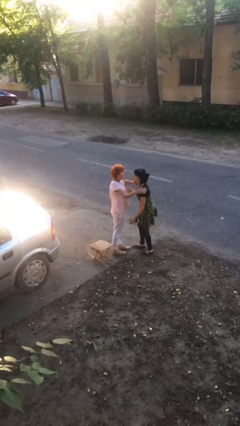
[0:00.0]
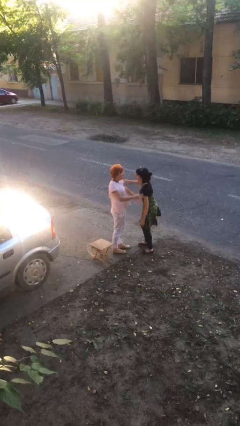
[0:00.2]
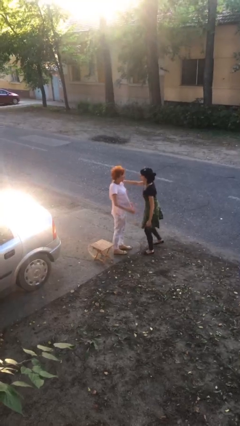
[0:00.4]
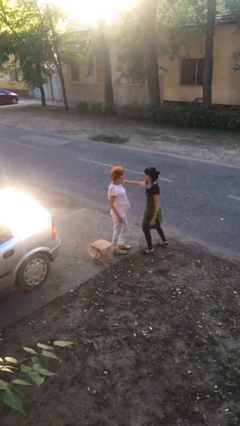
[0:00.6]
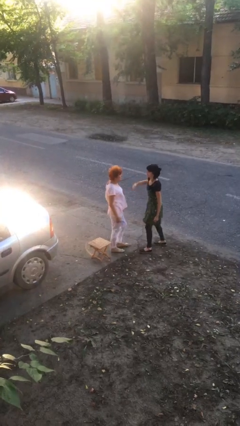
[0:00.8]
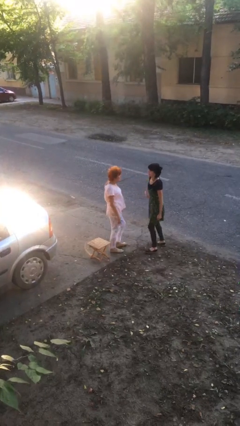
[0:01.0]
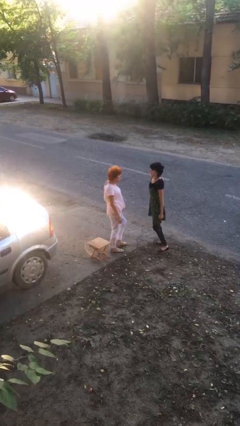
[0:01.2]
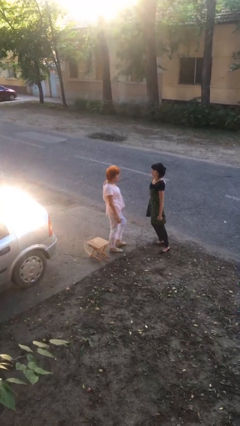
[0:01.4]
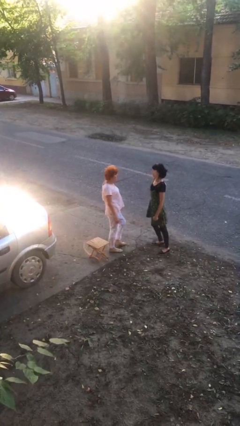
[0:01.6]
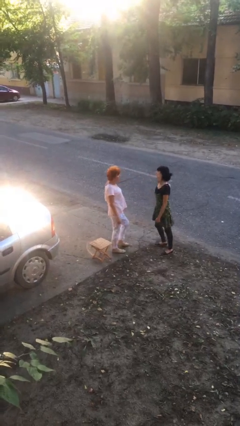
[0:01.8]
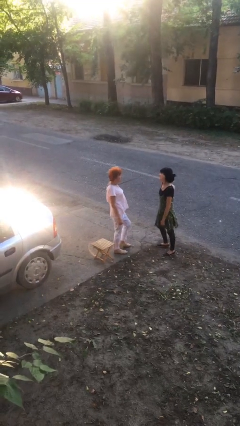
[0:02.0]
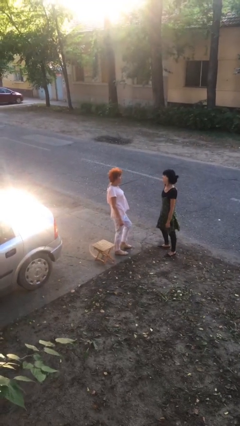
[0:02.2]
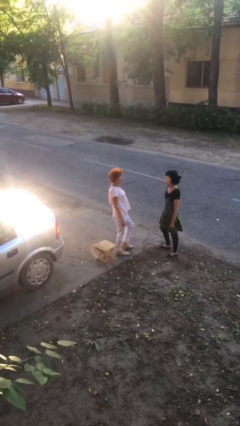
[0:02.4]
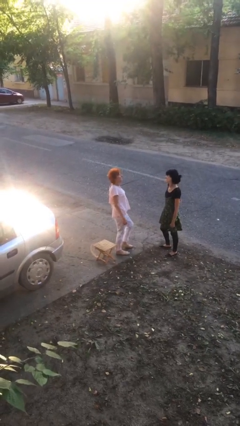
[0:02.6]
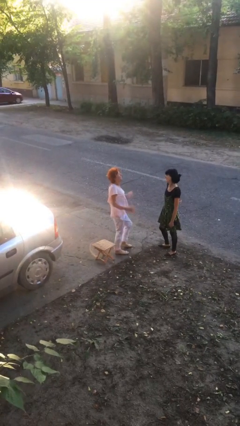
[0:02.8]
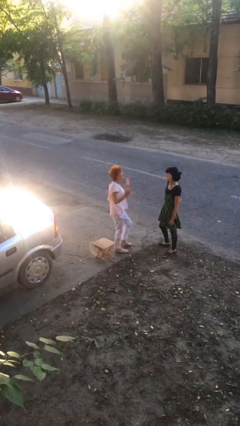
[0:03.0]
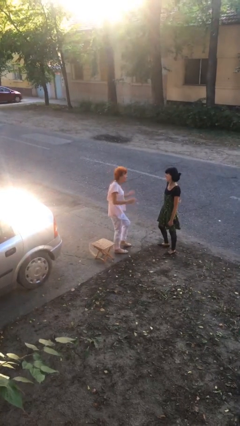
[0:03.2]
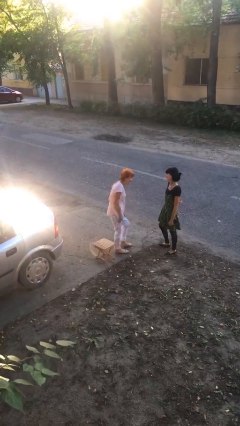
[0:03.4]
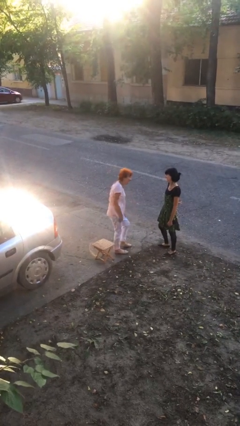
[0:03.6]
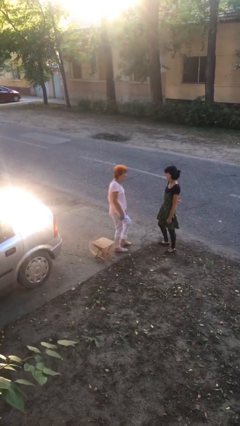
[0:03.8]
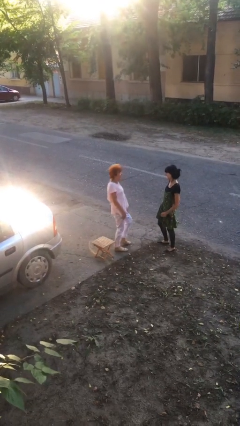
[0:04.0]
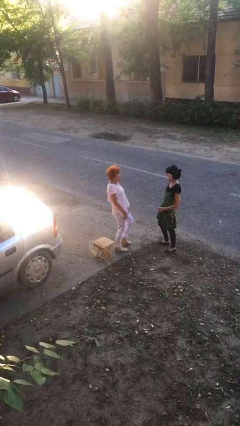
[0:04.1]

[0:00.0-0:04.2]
person talks to person

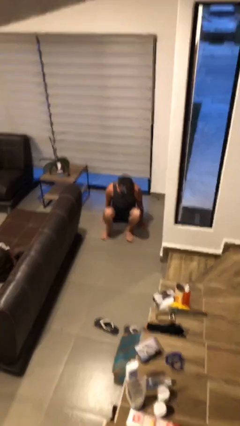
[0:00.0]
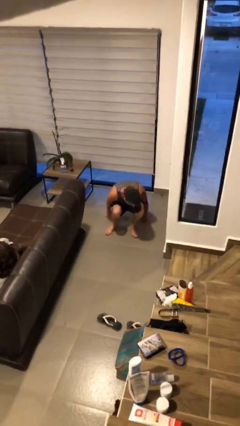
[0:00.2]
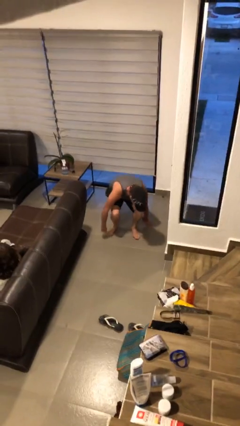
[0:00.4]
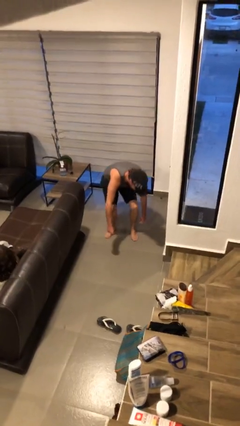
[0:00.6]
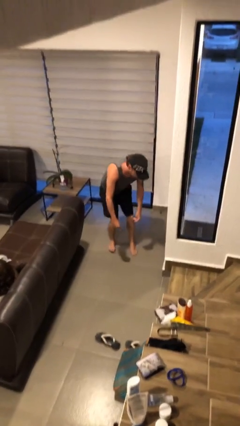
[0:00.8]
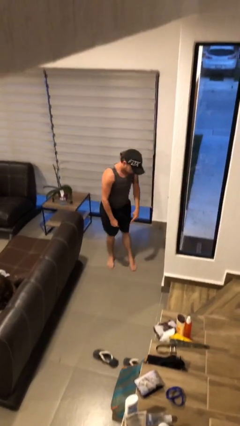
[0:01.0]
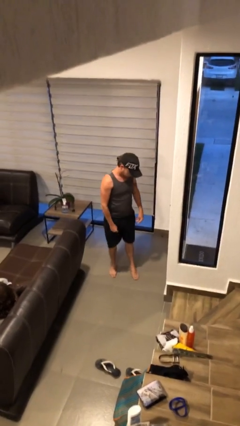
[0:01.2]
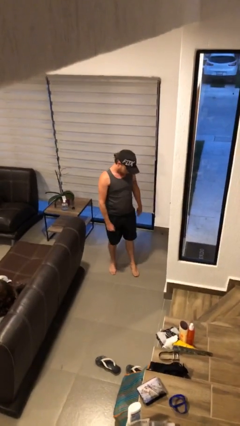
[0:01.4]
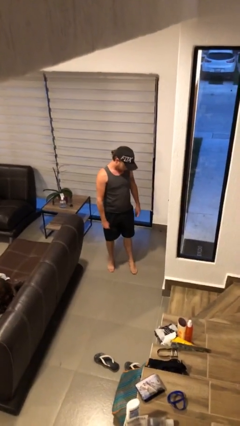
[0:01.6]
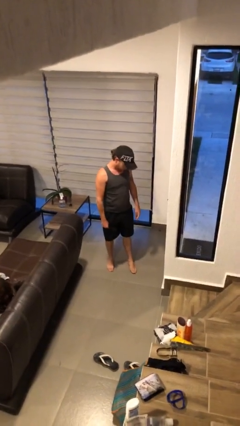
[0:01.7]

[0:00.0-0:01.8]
person stands up

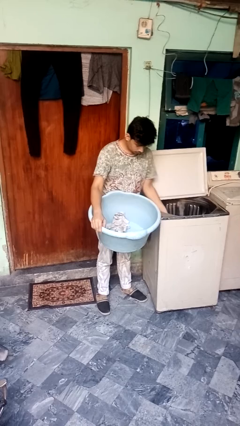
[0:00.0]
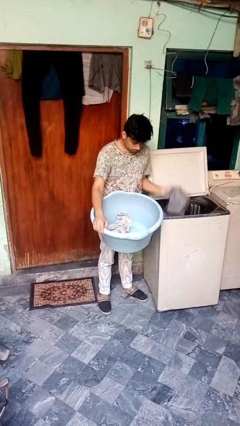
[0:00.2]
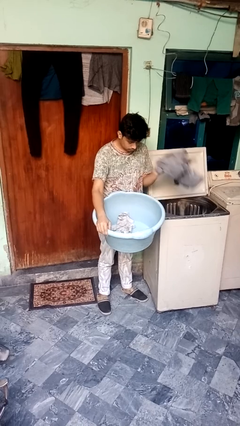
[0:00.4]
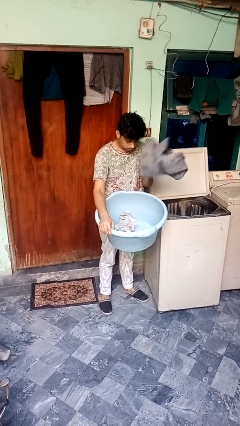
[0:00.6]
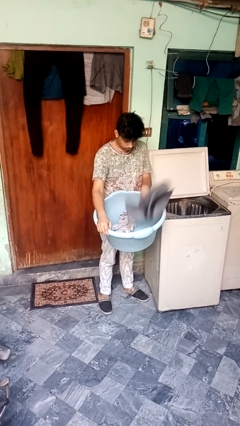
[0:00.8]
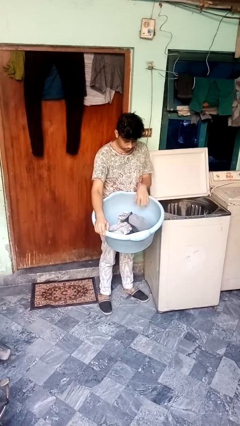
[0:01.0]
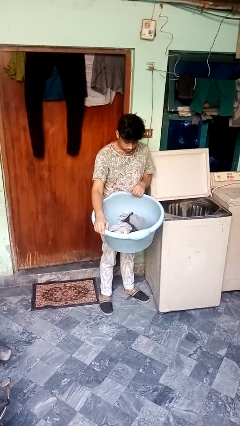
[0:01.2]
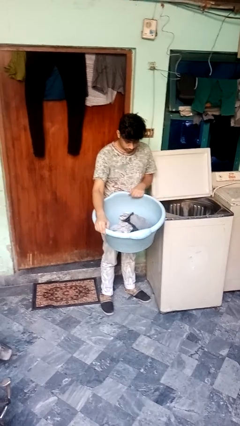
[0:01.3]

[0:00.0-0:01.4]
person loads clotheswasher

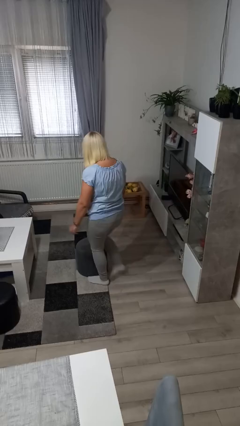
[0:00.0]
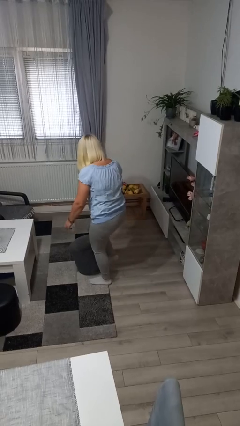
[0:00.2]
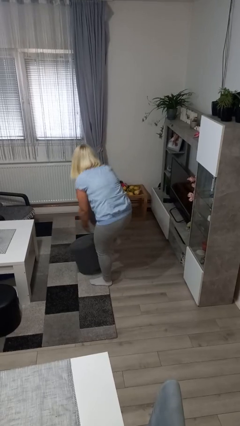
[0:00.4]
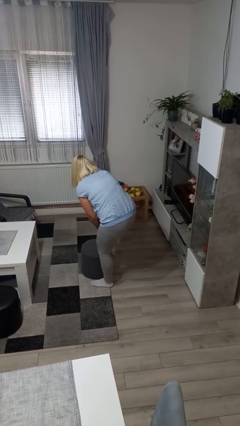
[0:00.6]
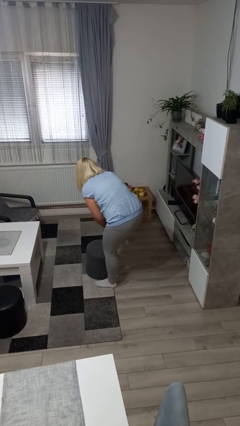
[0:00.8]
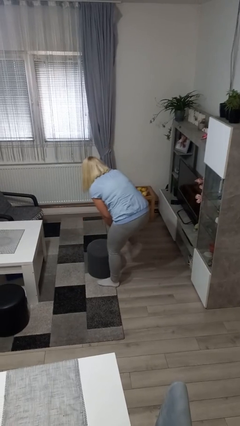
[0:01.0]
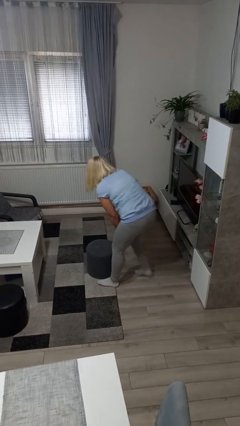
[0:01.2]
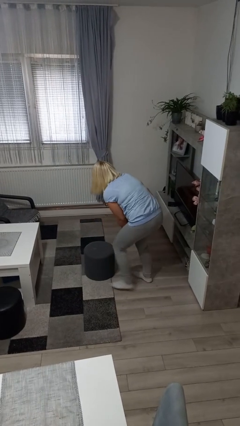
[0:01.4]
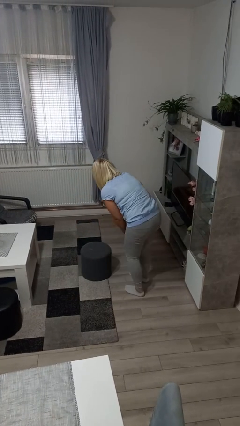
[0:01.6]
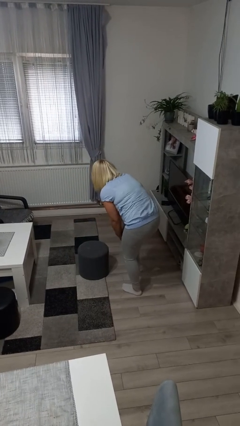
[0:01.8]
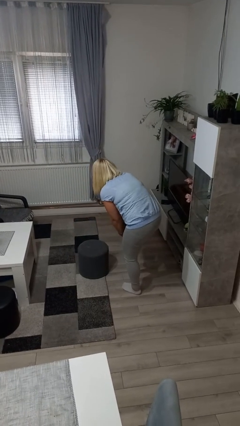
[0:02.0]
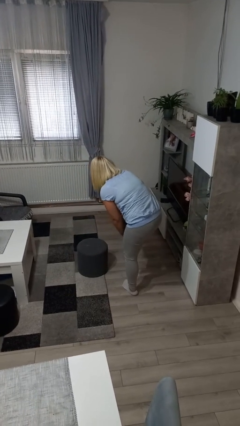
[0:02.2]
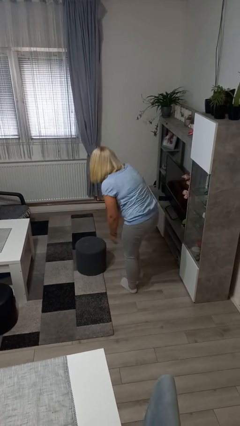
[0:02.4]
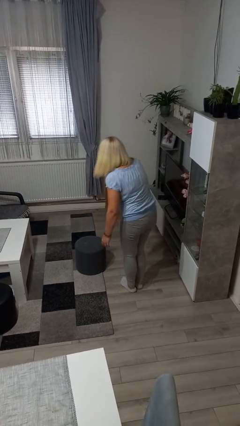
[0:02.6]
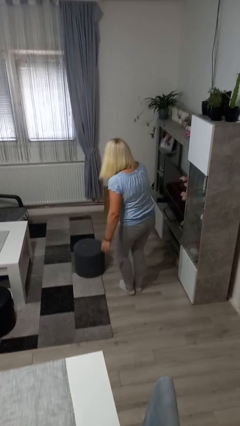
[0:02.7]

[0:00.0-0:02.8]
person stubs toe

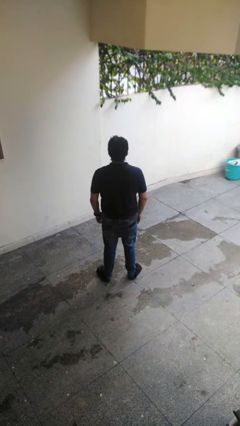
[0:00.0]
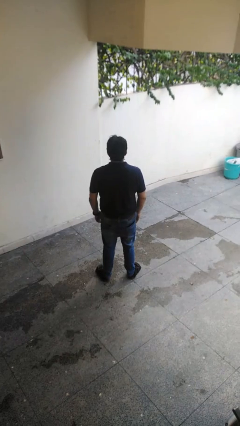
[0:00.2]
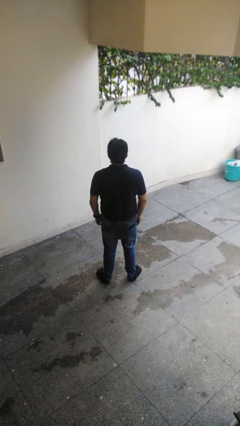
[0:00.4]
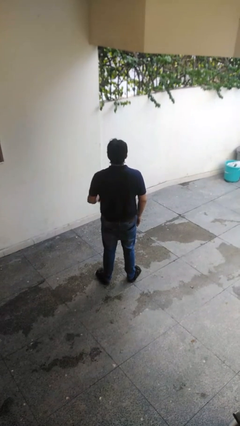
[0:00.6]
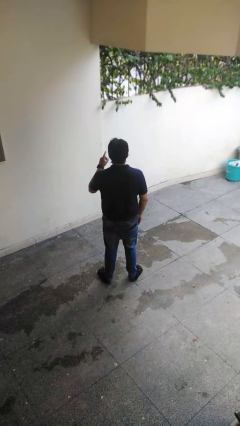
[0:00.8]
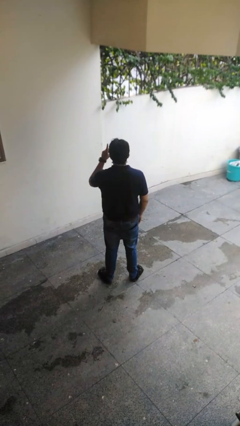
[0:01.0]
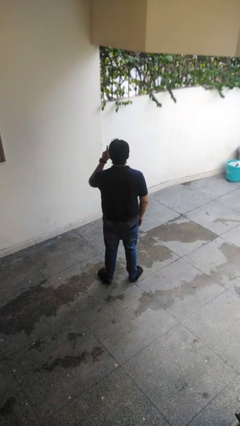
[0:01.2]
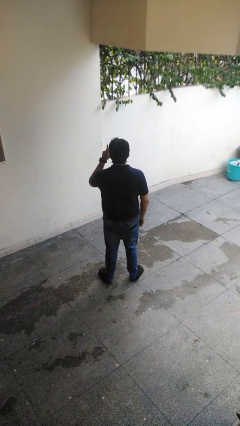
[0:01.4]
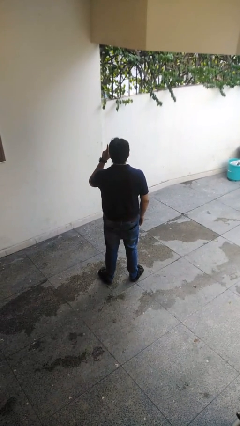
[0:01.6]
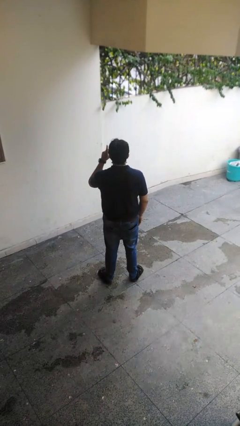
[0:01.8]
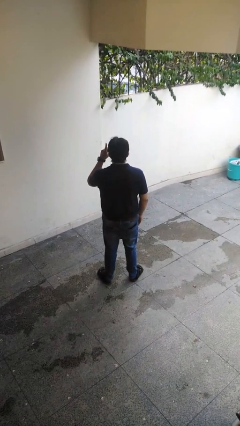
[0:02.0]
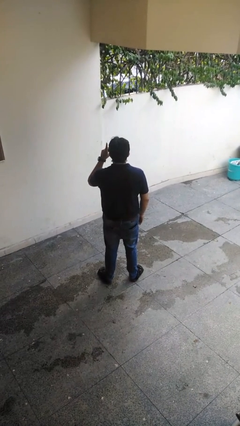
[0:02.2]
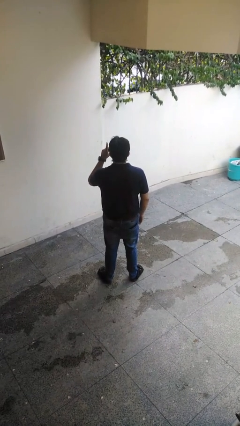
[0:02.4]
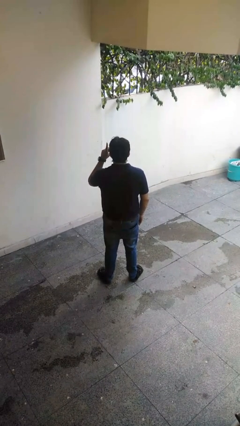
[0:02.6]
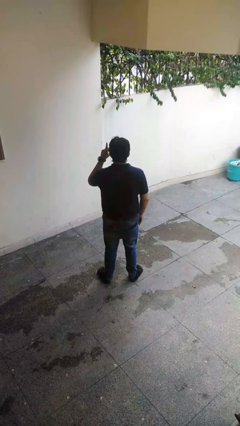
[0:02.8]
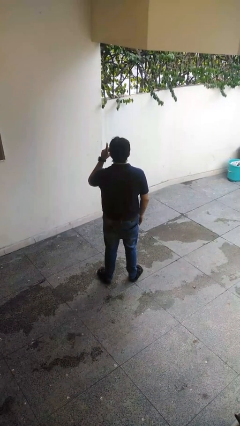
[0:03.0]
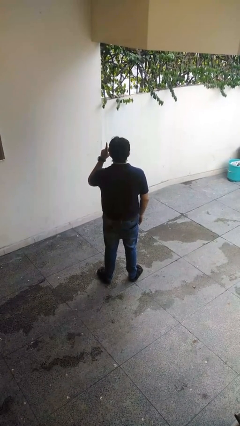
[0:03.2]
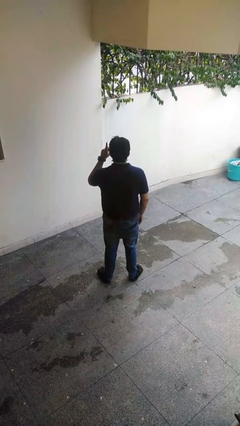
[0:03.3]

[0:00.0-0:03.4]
person gestures number one

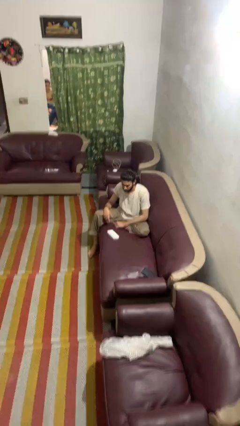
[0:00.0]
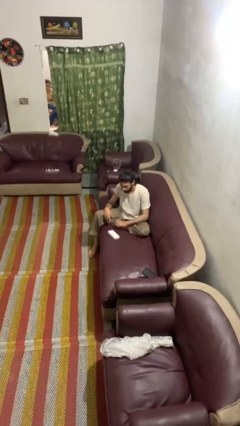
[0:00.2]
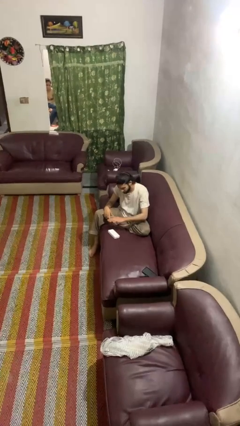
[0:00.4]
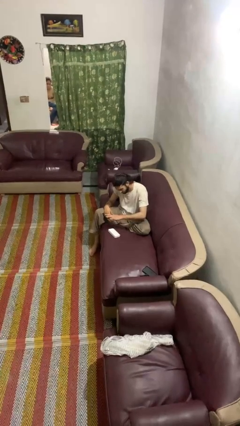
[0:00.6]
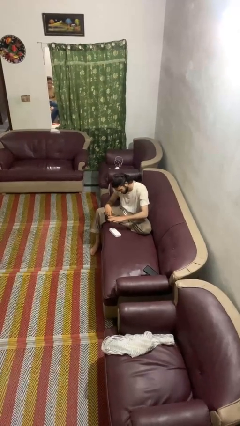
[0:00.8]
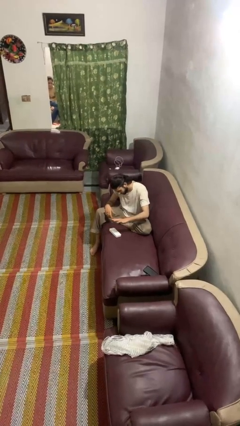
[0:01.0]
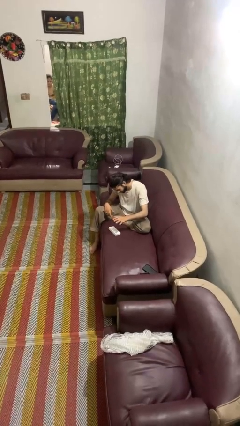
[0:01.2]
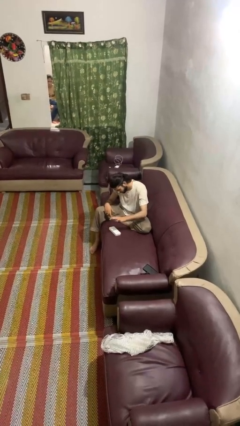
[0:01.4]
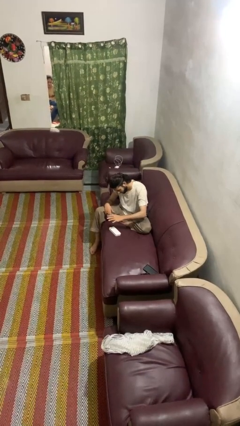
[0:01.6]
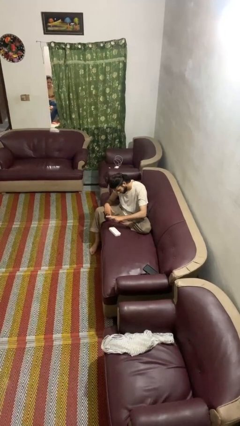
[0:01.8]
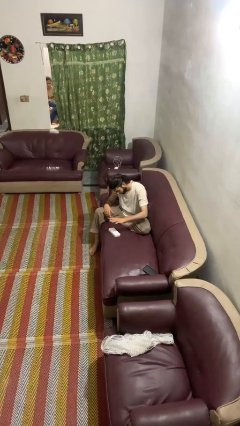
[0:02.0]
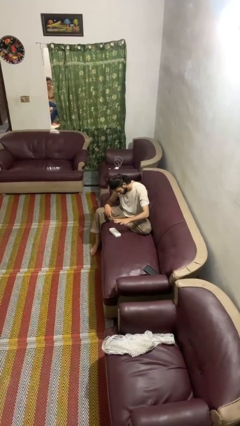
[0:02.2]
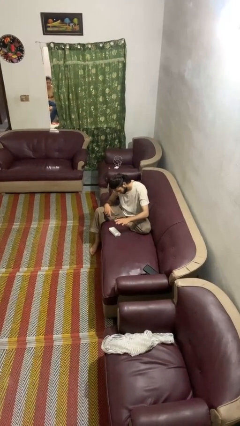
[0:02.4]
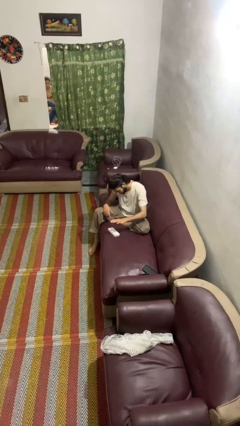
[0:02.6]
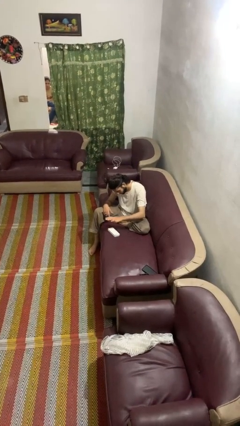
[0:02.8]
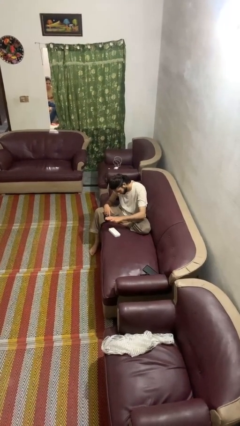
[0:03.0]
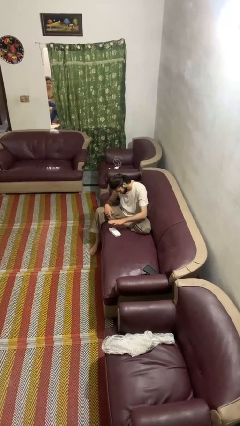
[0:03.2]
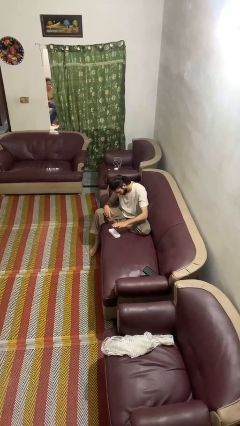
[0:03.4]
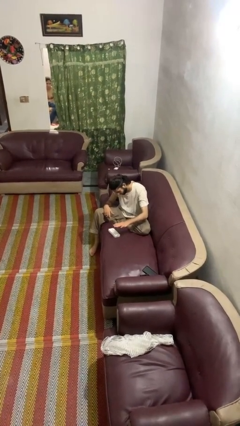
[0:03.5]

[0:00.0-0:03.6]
person waves hand over object

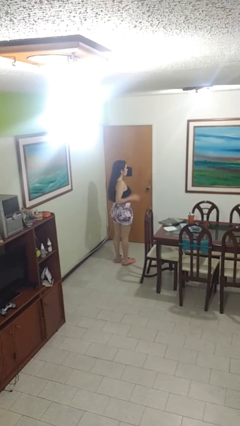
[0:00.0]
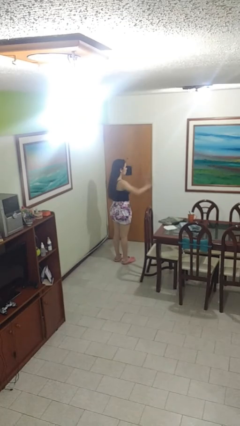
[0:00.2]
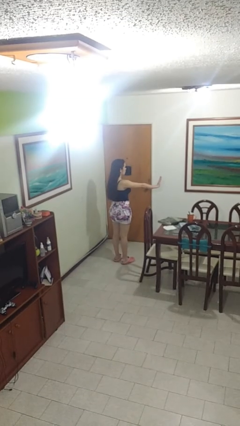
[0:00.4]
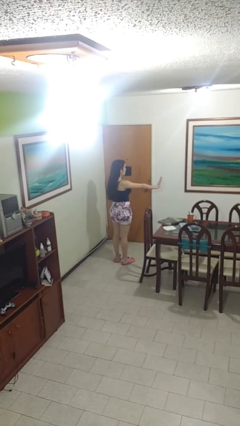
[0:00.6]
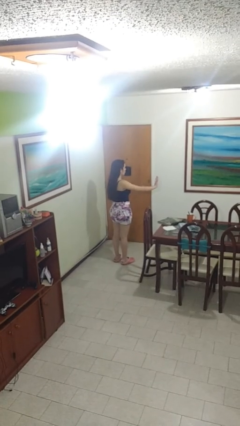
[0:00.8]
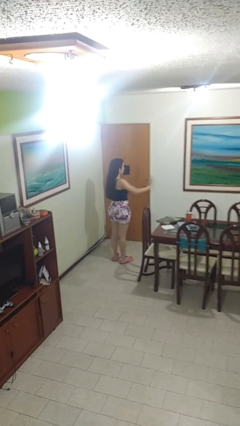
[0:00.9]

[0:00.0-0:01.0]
person gestures stop
